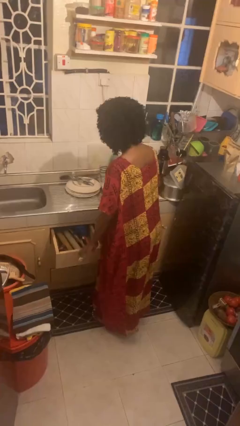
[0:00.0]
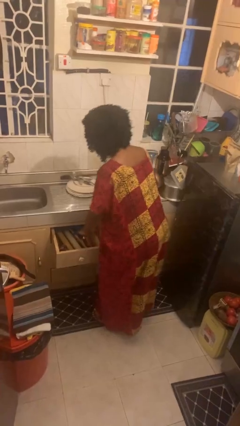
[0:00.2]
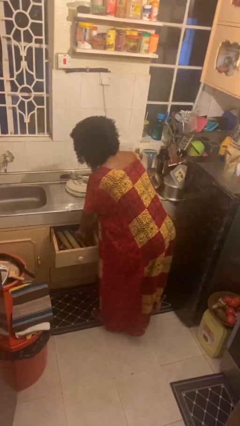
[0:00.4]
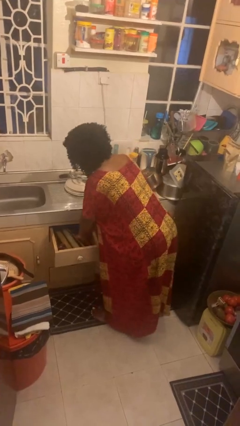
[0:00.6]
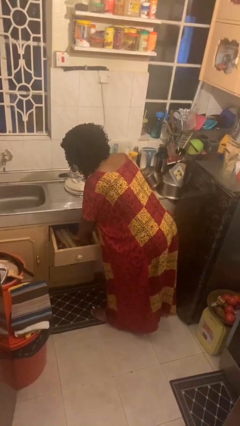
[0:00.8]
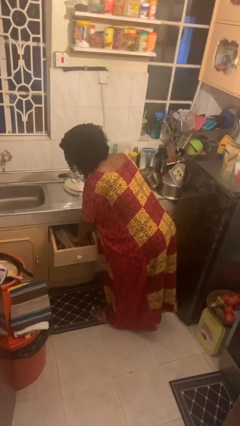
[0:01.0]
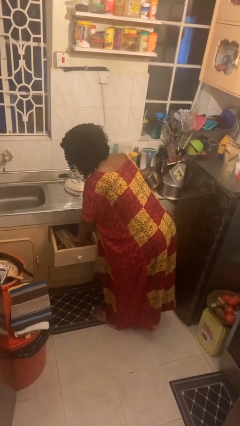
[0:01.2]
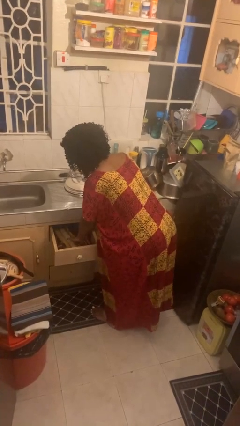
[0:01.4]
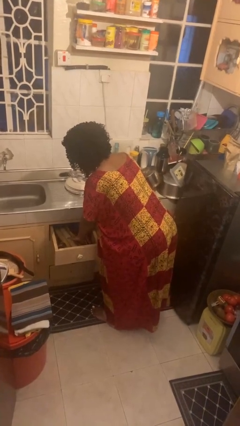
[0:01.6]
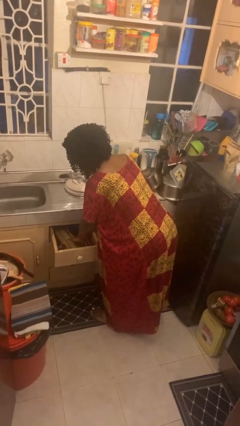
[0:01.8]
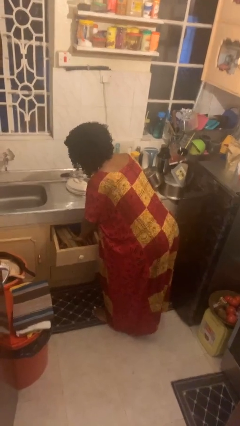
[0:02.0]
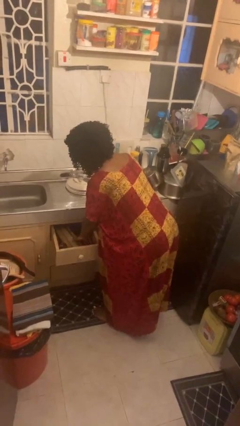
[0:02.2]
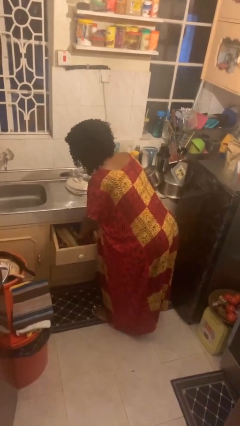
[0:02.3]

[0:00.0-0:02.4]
person searches in kitchen drawer

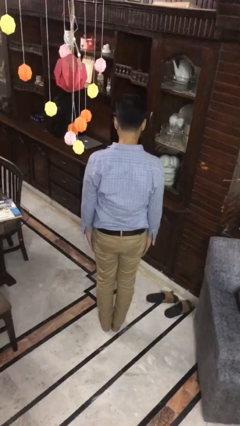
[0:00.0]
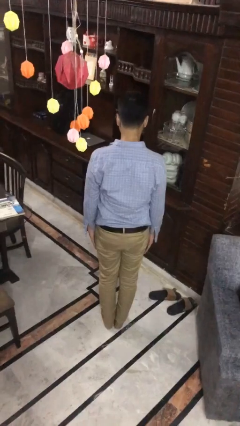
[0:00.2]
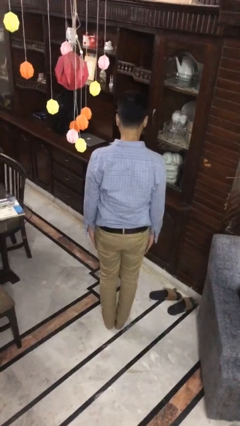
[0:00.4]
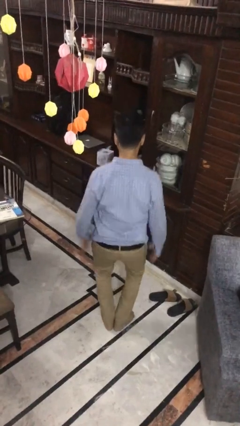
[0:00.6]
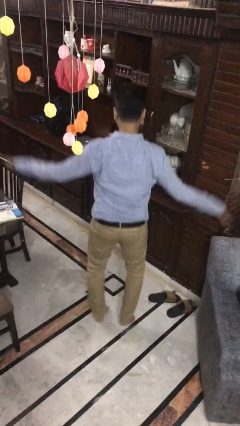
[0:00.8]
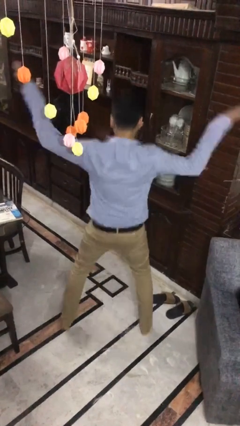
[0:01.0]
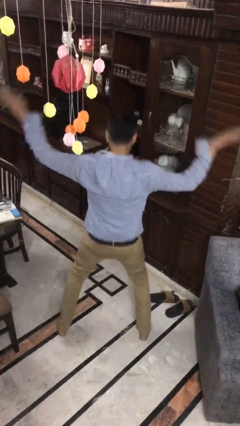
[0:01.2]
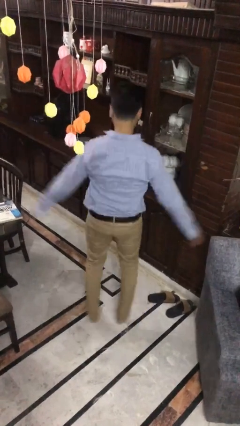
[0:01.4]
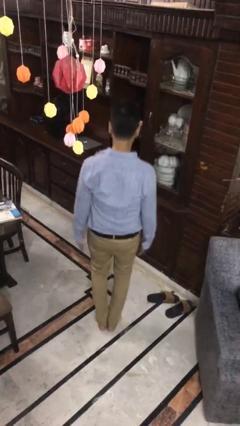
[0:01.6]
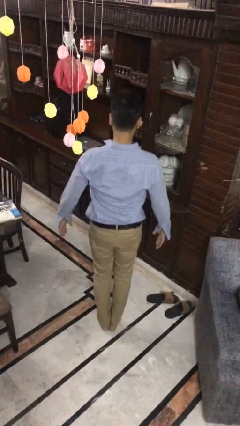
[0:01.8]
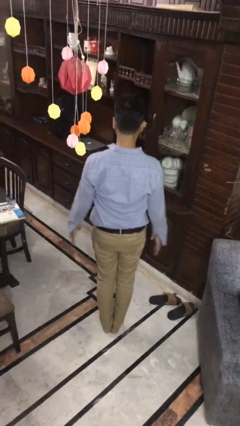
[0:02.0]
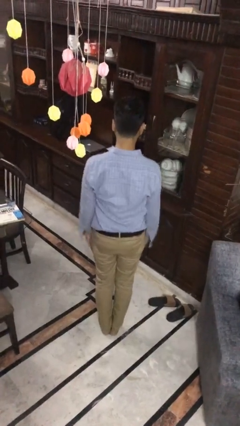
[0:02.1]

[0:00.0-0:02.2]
person exercises with jumping jacks

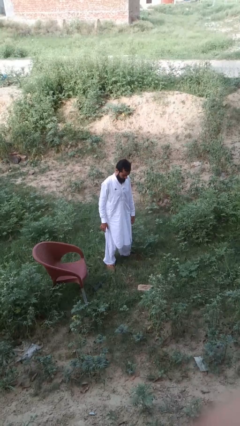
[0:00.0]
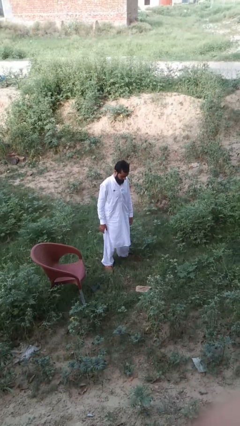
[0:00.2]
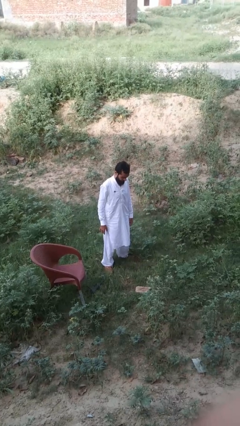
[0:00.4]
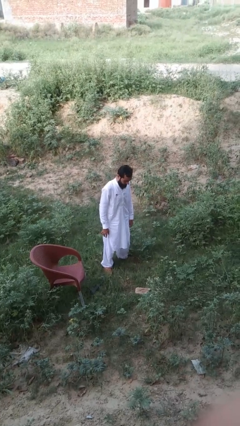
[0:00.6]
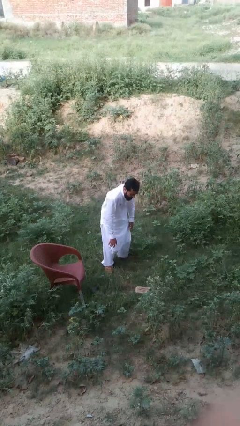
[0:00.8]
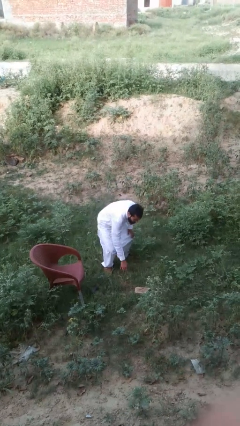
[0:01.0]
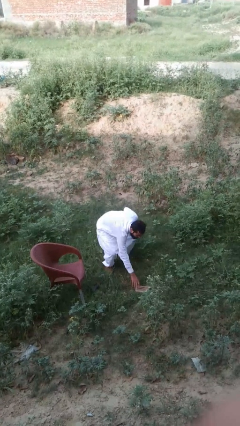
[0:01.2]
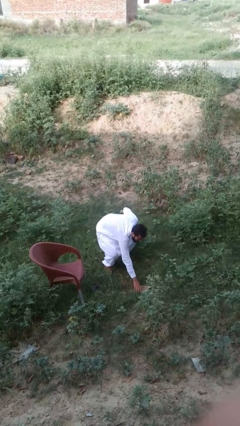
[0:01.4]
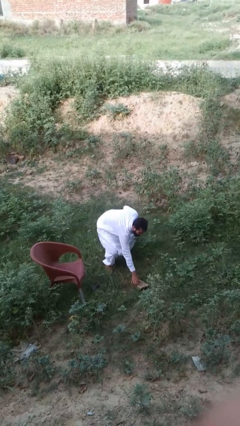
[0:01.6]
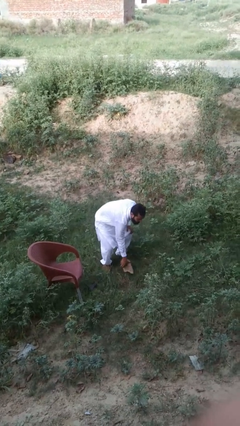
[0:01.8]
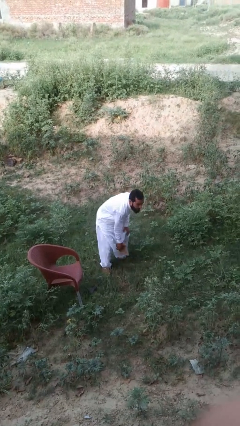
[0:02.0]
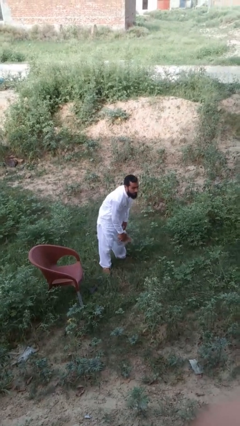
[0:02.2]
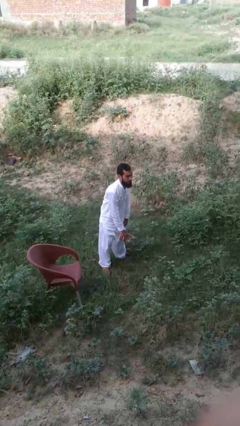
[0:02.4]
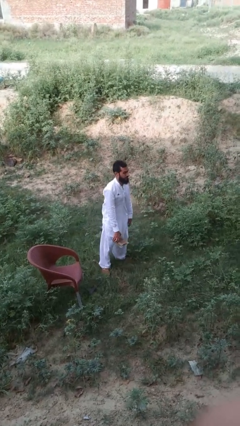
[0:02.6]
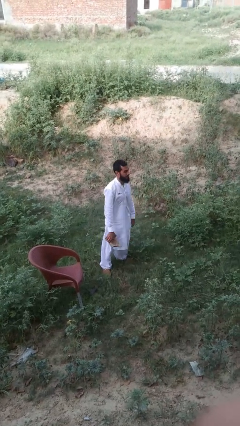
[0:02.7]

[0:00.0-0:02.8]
person picks up object from floor

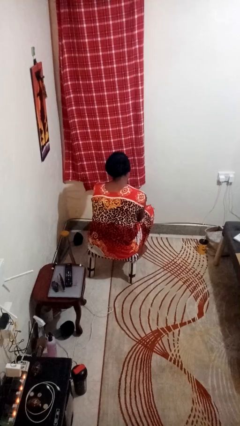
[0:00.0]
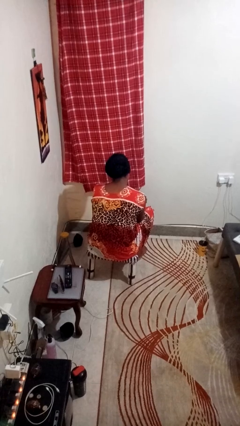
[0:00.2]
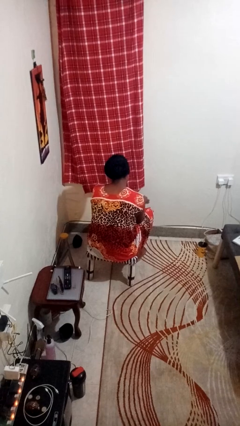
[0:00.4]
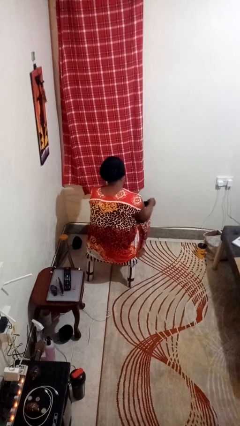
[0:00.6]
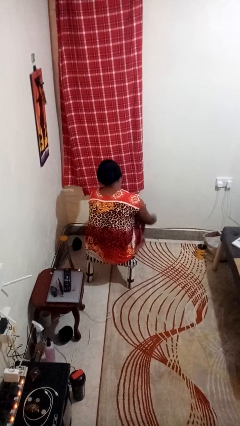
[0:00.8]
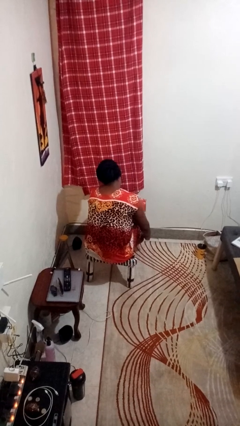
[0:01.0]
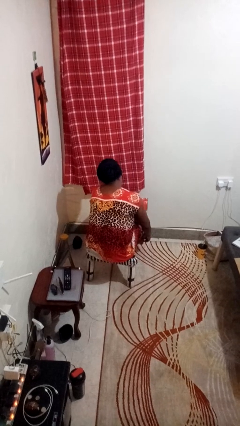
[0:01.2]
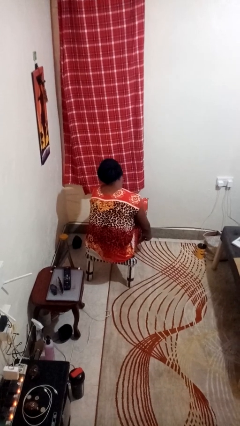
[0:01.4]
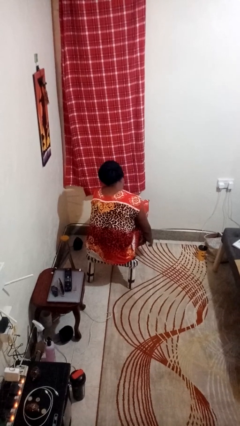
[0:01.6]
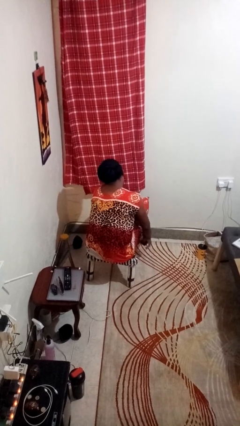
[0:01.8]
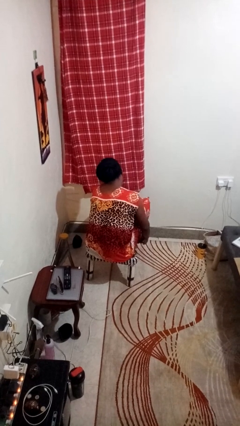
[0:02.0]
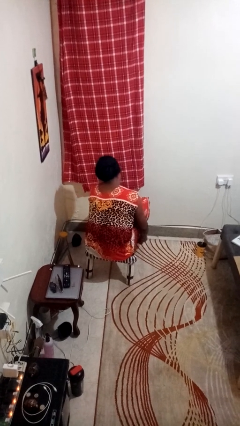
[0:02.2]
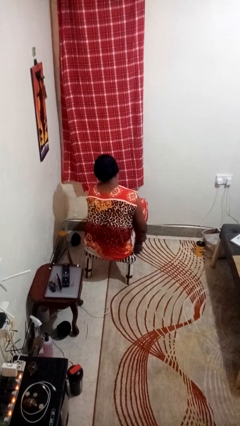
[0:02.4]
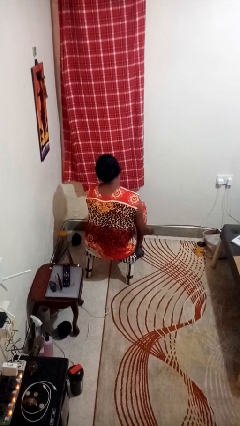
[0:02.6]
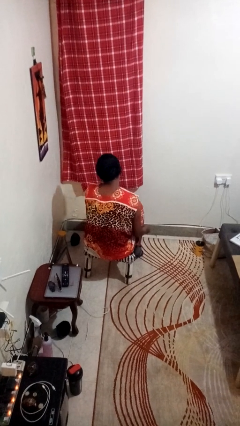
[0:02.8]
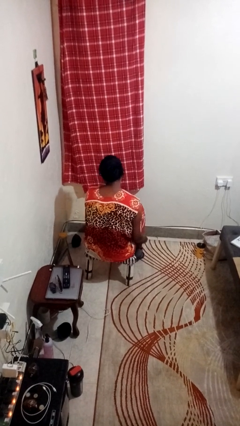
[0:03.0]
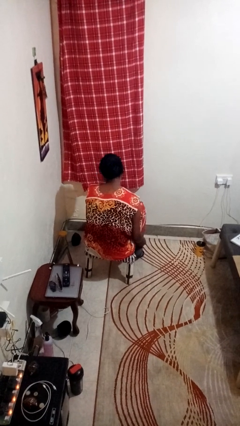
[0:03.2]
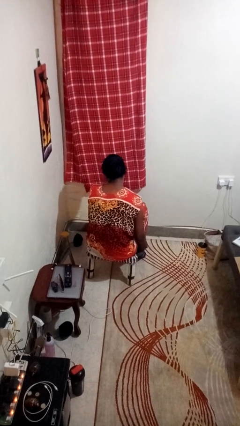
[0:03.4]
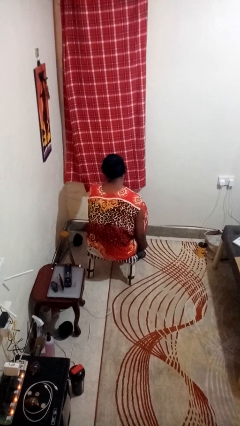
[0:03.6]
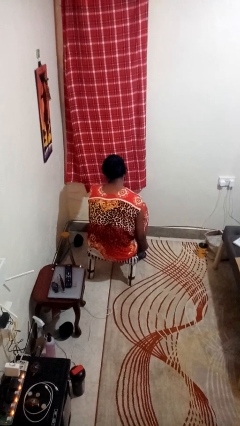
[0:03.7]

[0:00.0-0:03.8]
person puts on socks

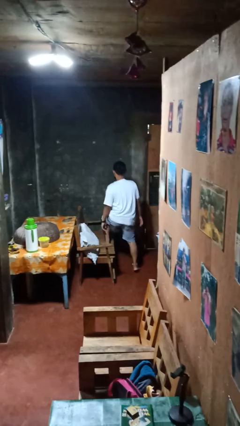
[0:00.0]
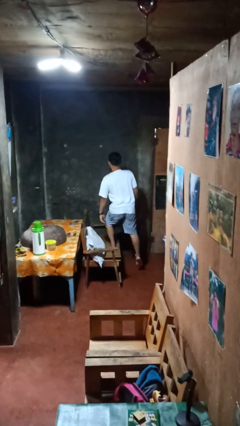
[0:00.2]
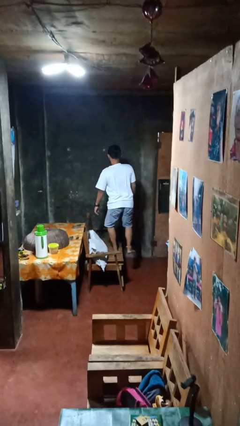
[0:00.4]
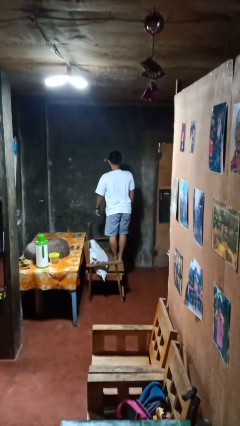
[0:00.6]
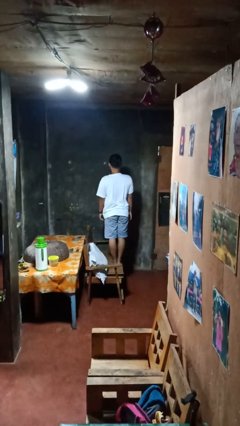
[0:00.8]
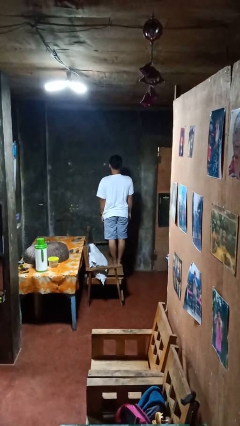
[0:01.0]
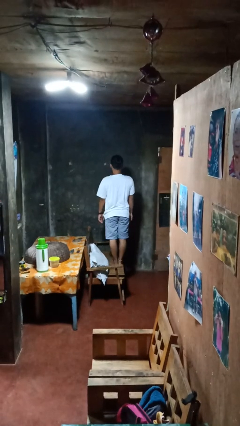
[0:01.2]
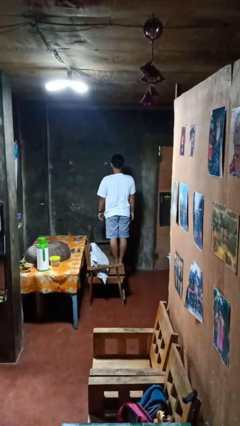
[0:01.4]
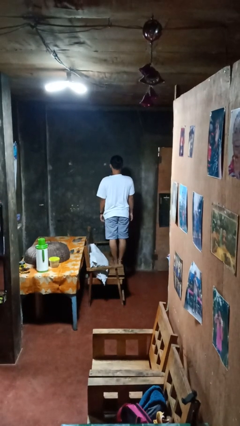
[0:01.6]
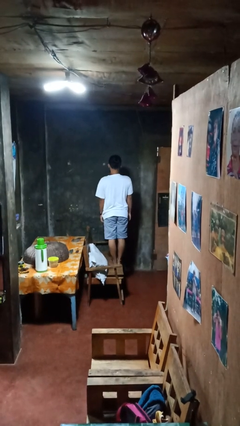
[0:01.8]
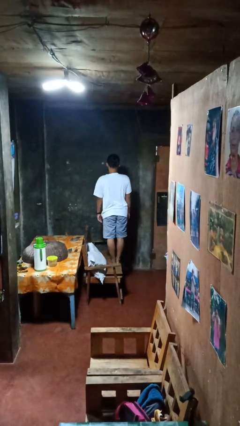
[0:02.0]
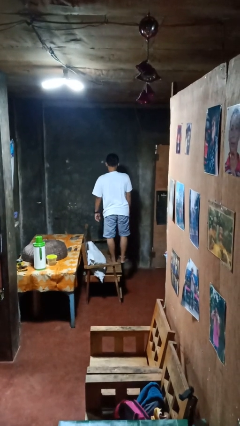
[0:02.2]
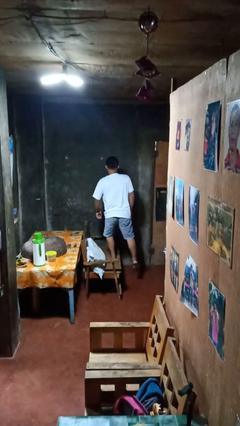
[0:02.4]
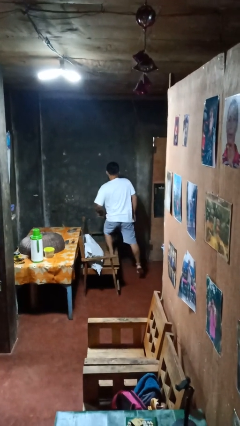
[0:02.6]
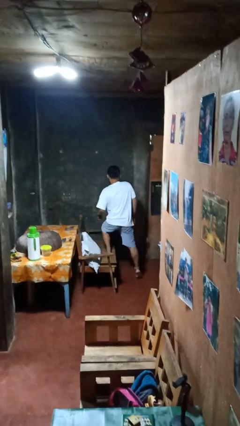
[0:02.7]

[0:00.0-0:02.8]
person climbs on couch

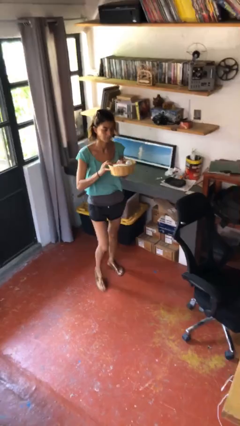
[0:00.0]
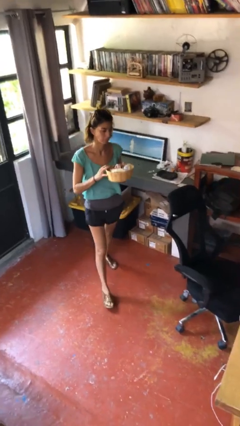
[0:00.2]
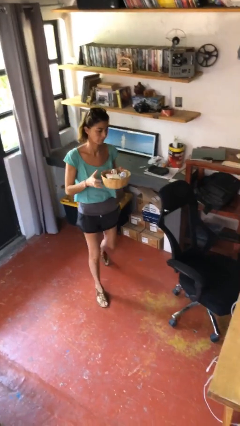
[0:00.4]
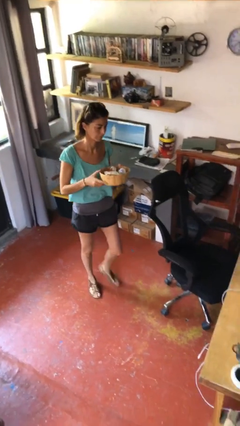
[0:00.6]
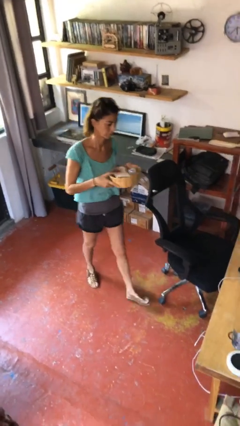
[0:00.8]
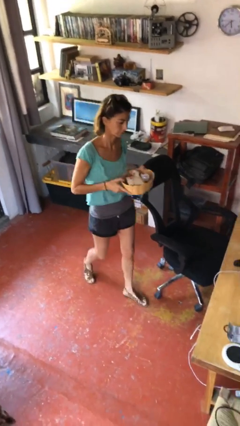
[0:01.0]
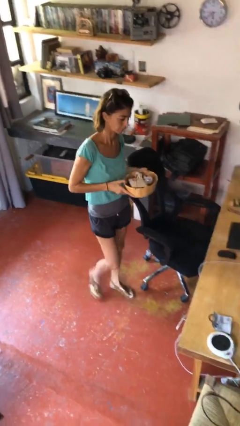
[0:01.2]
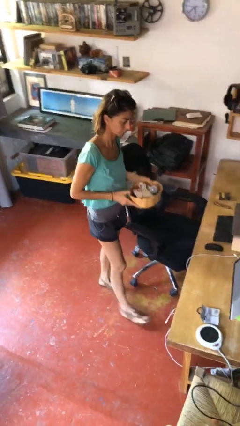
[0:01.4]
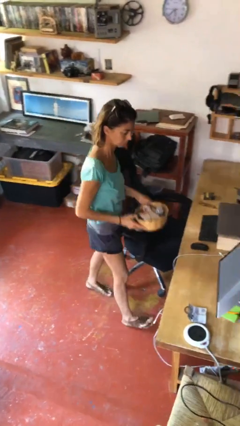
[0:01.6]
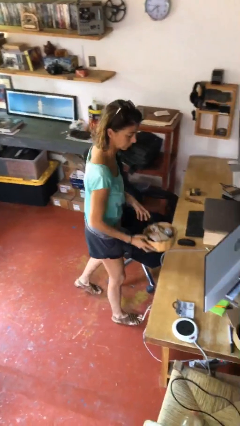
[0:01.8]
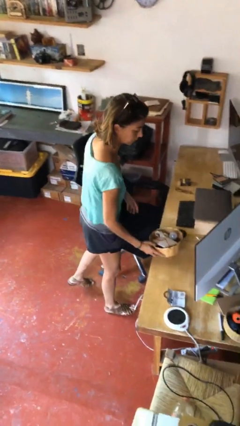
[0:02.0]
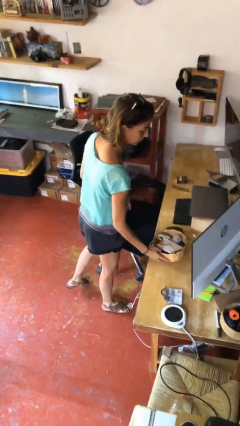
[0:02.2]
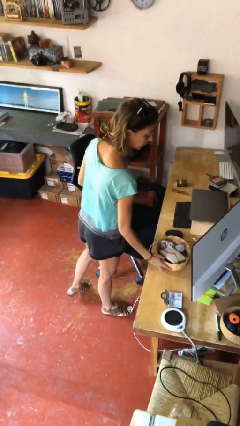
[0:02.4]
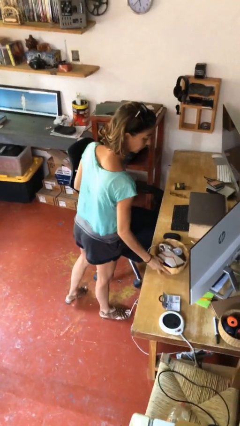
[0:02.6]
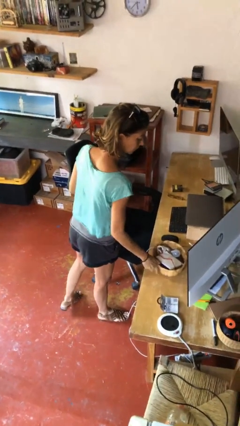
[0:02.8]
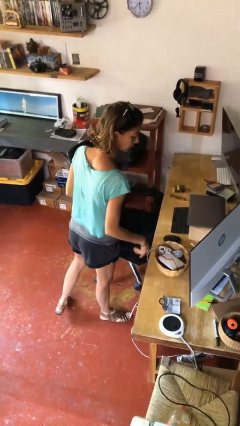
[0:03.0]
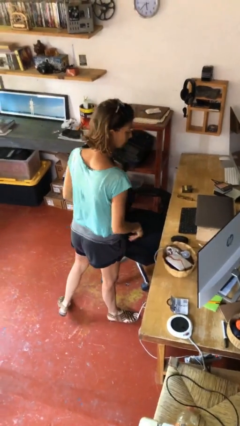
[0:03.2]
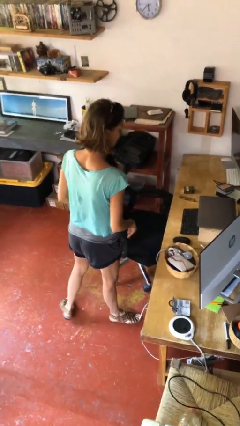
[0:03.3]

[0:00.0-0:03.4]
person puts down object on table
